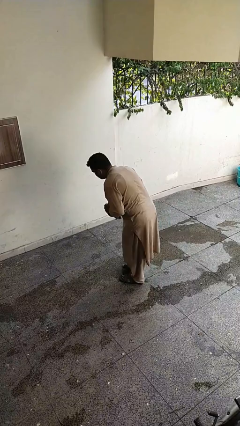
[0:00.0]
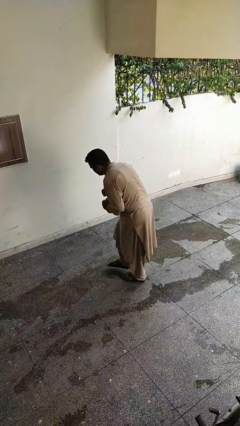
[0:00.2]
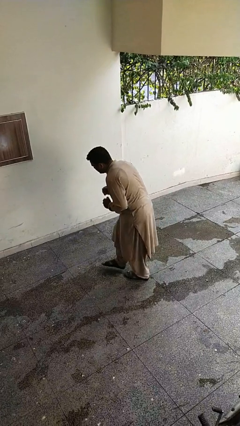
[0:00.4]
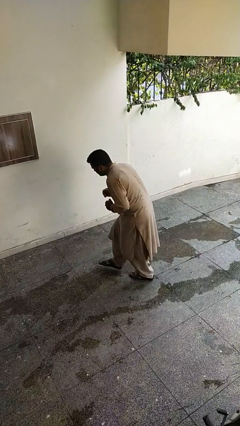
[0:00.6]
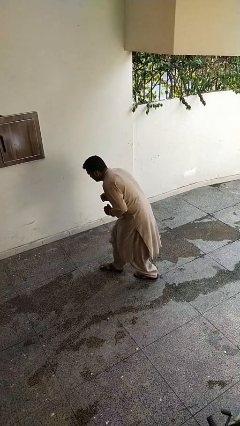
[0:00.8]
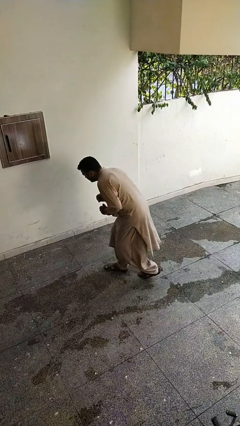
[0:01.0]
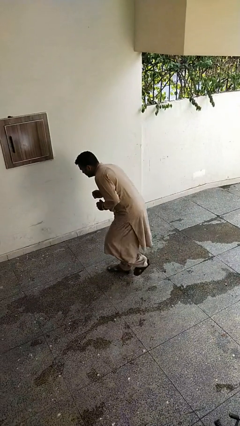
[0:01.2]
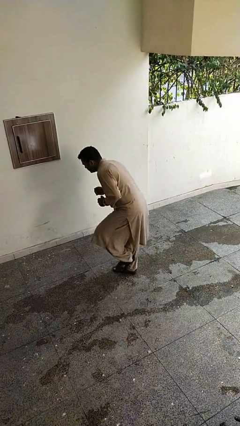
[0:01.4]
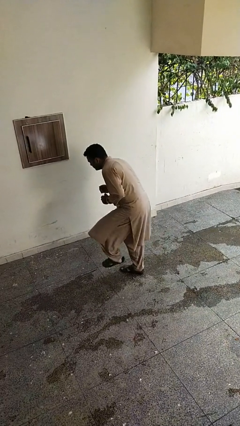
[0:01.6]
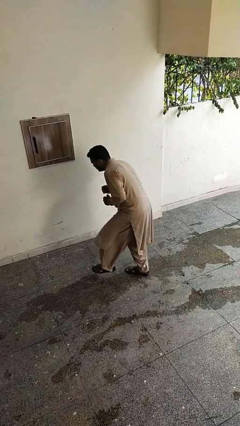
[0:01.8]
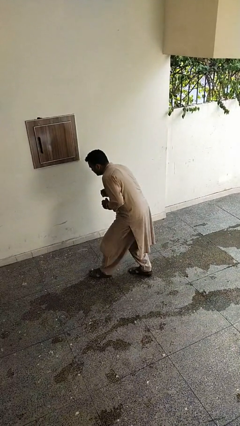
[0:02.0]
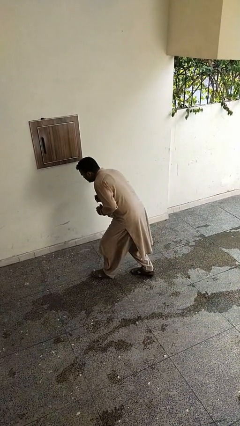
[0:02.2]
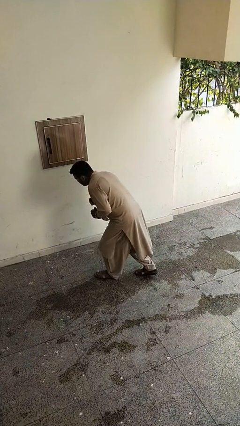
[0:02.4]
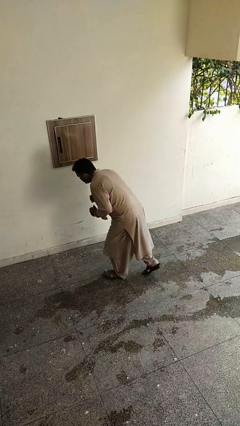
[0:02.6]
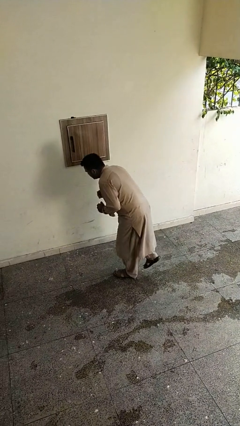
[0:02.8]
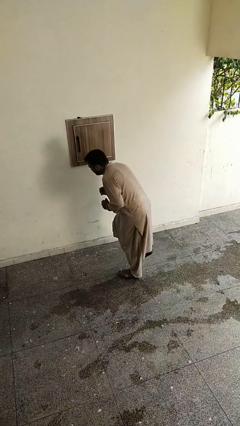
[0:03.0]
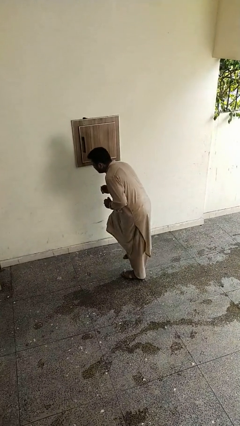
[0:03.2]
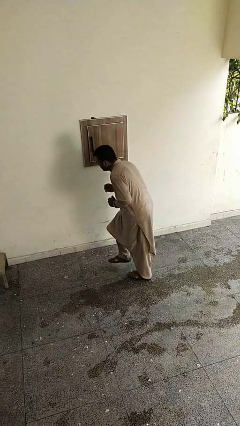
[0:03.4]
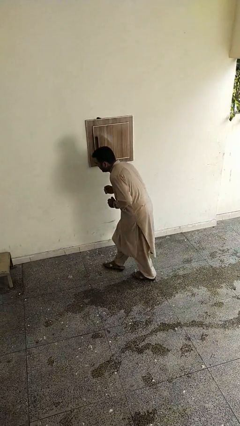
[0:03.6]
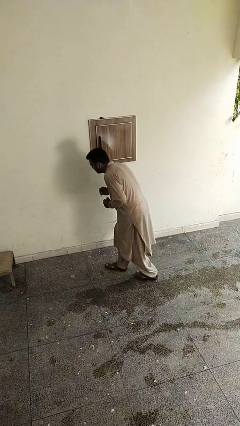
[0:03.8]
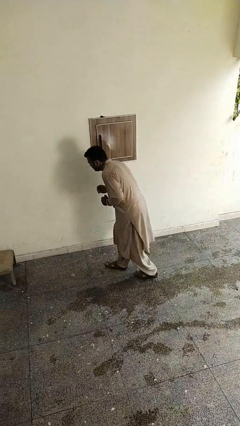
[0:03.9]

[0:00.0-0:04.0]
person walks tiptoe

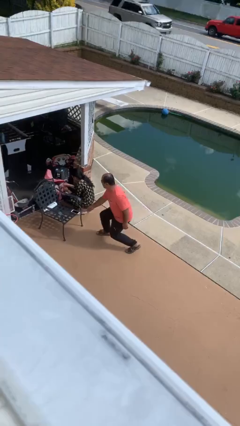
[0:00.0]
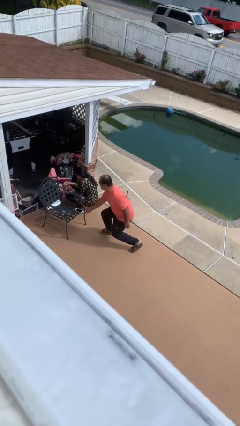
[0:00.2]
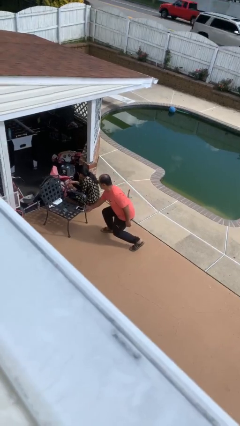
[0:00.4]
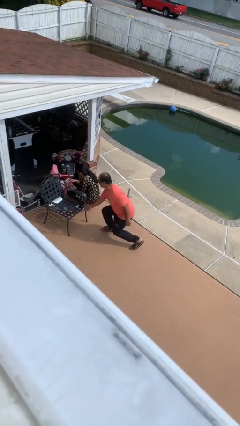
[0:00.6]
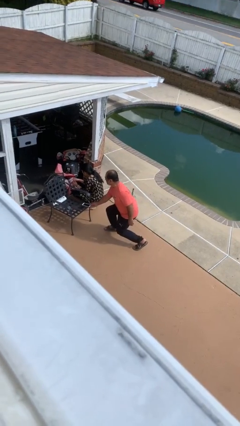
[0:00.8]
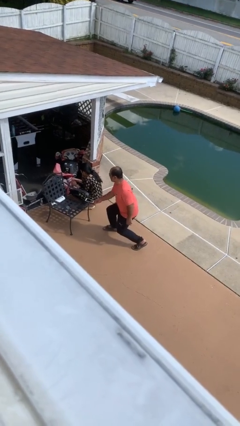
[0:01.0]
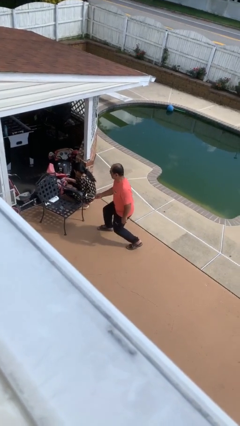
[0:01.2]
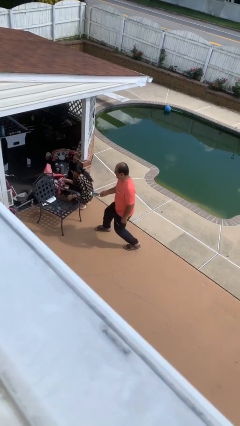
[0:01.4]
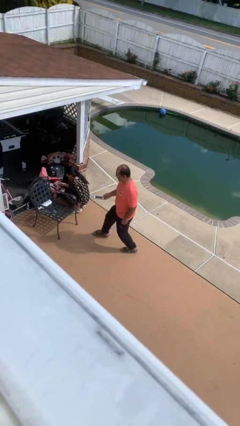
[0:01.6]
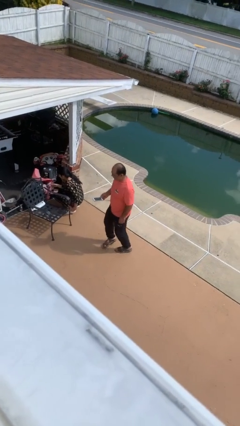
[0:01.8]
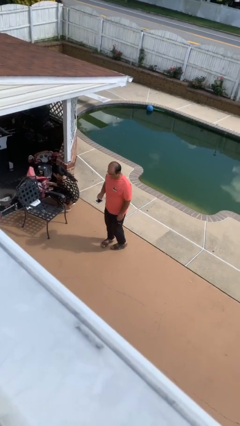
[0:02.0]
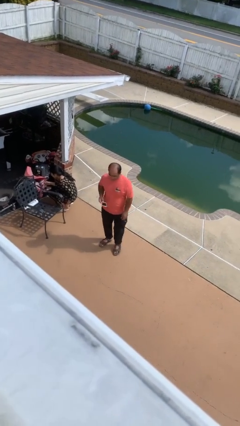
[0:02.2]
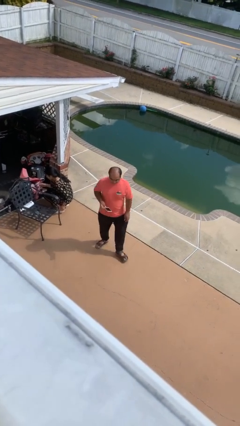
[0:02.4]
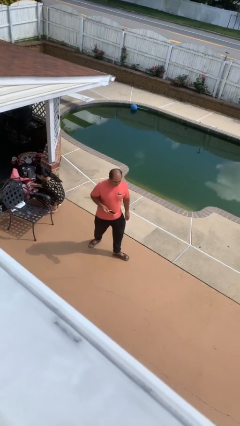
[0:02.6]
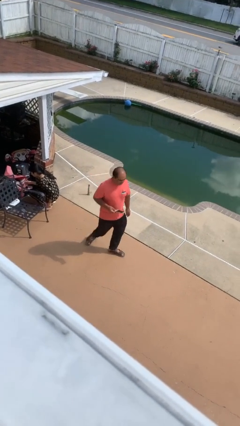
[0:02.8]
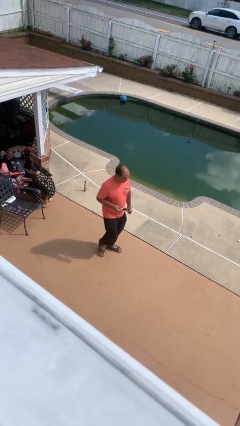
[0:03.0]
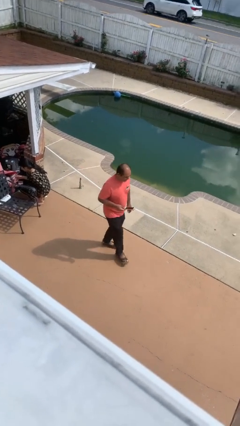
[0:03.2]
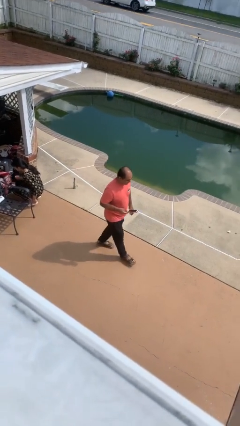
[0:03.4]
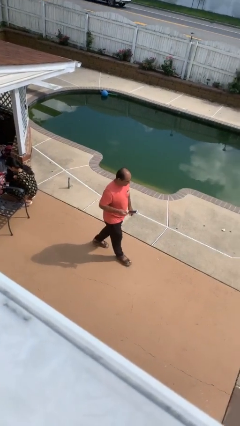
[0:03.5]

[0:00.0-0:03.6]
person steals object from person

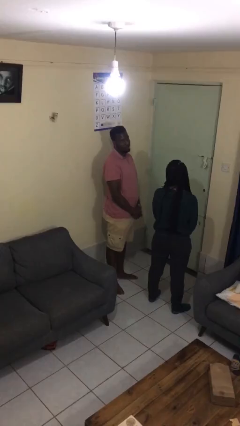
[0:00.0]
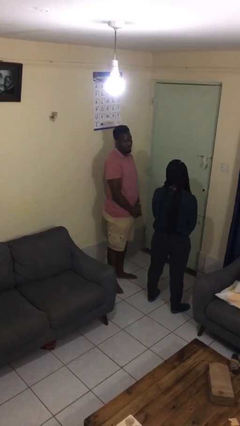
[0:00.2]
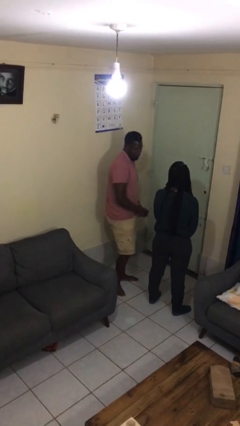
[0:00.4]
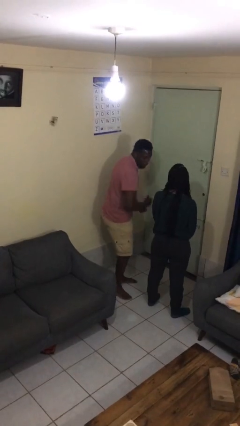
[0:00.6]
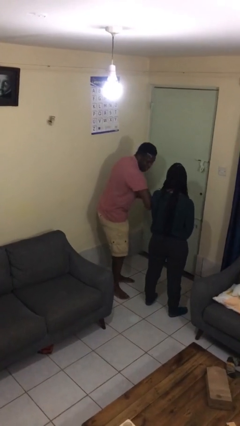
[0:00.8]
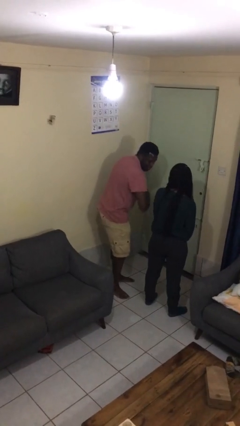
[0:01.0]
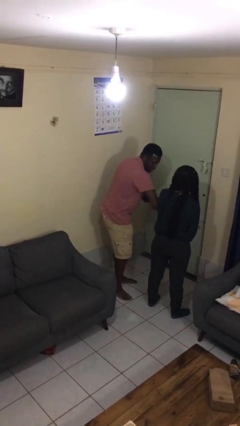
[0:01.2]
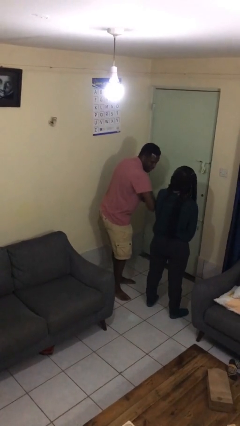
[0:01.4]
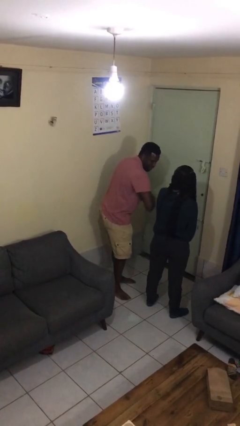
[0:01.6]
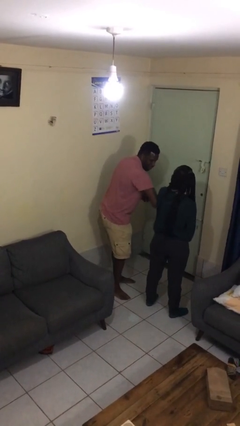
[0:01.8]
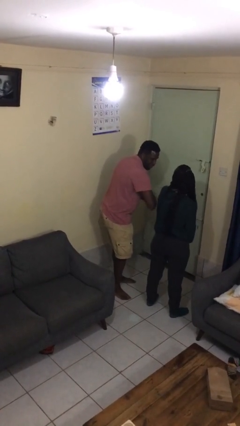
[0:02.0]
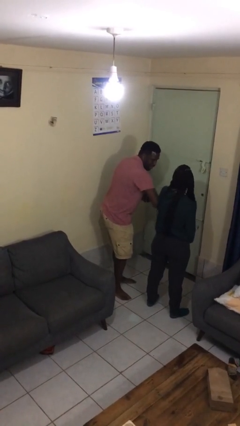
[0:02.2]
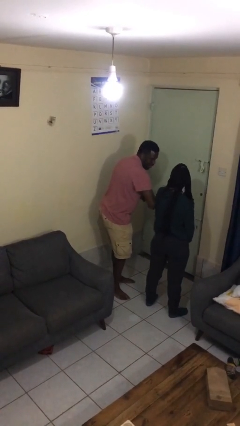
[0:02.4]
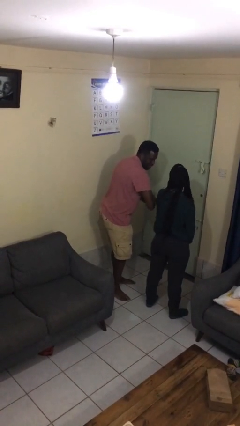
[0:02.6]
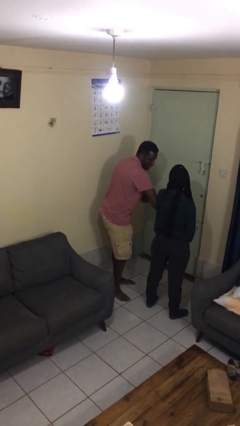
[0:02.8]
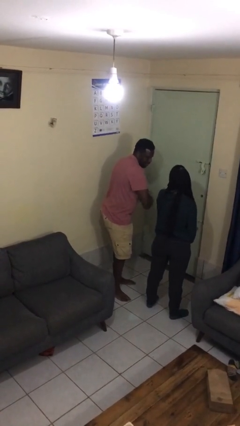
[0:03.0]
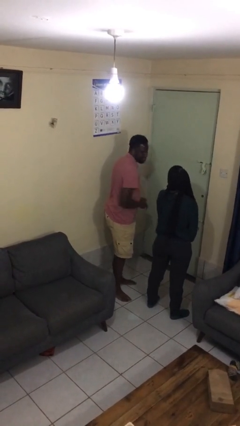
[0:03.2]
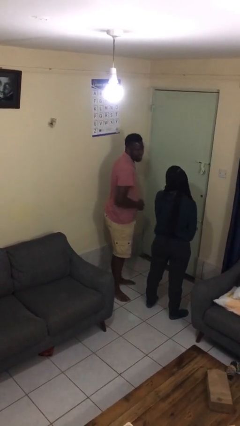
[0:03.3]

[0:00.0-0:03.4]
person nudges person with elbow

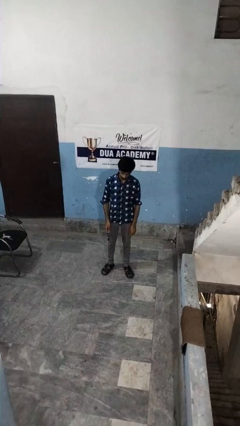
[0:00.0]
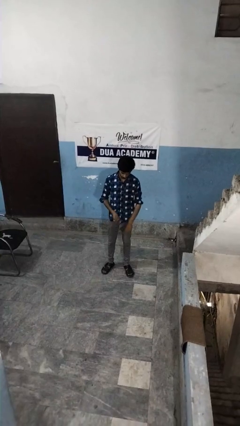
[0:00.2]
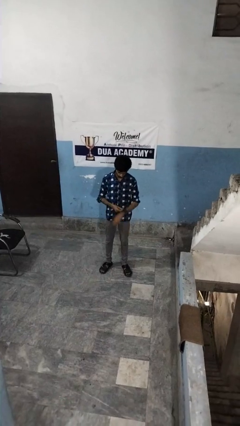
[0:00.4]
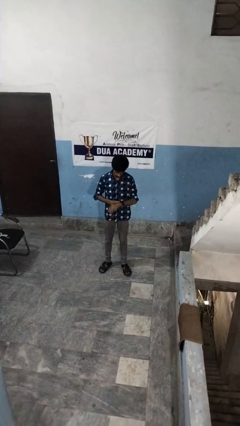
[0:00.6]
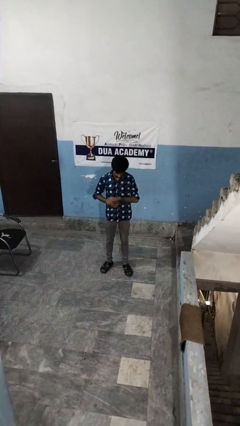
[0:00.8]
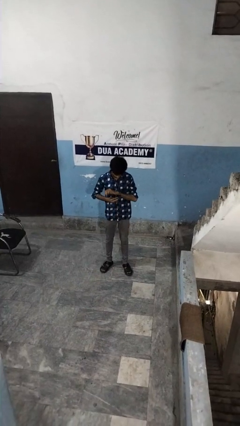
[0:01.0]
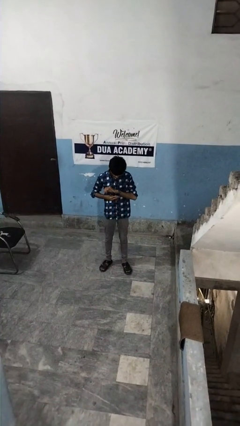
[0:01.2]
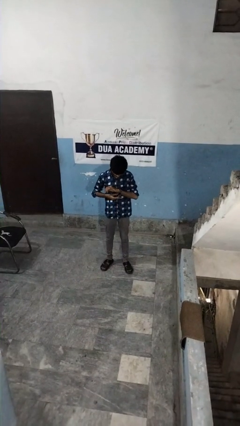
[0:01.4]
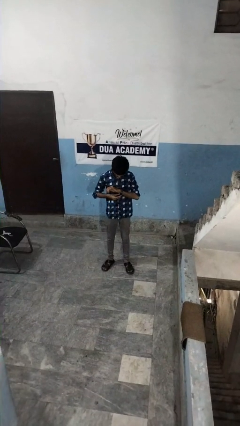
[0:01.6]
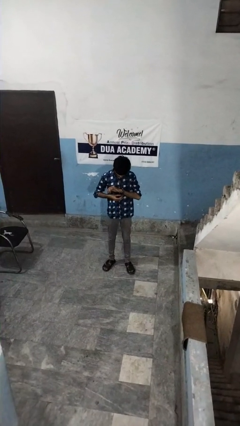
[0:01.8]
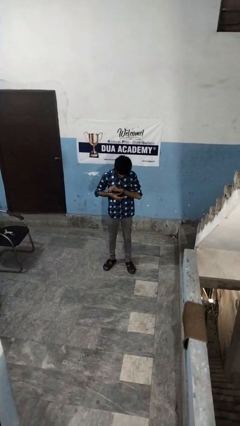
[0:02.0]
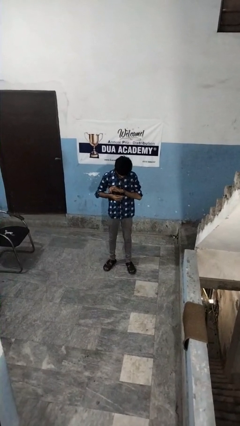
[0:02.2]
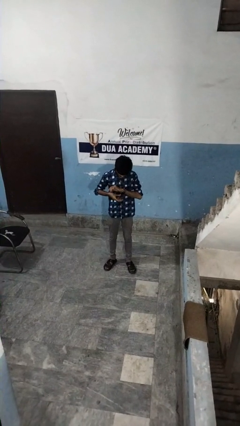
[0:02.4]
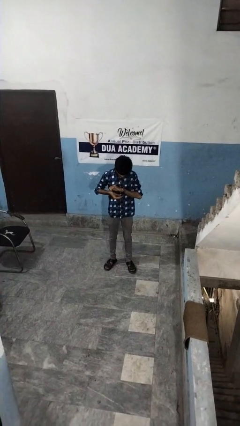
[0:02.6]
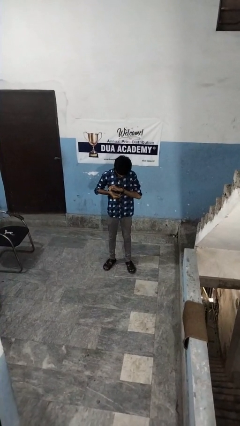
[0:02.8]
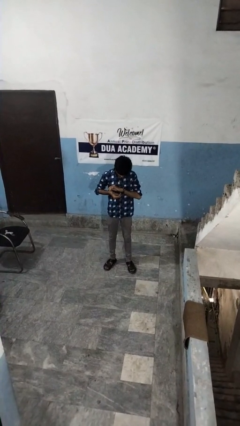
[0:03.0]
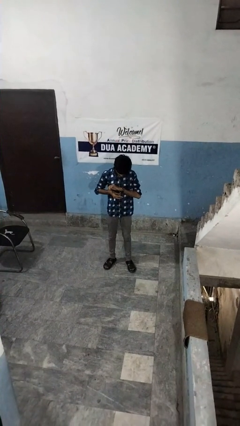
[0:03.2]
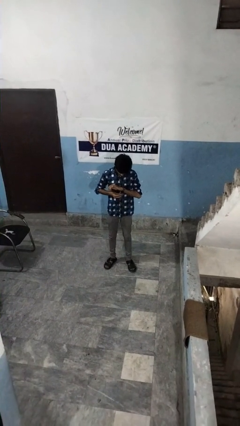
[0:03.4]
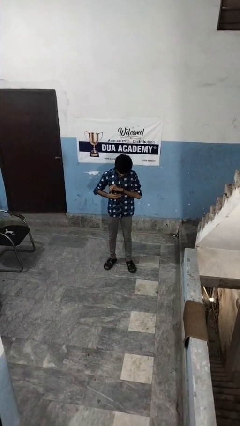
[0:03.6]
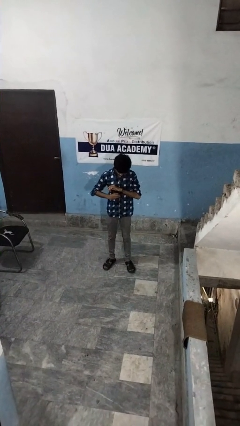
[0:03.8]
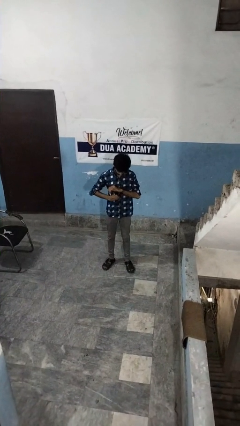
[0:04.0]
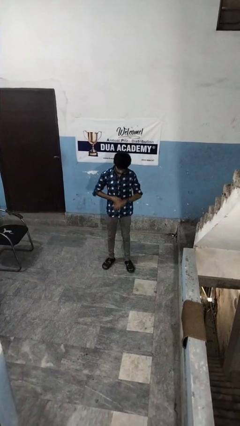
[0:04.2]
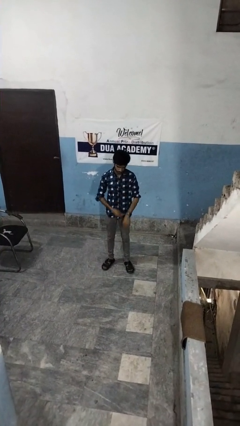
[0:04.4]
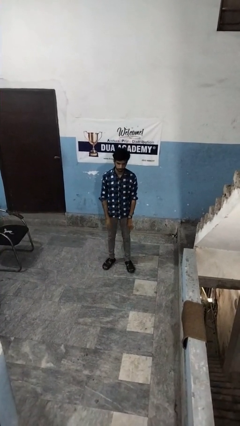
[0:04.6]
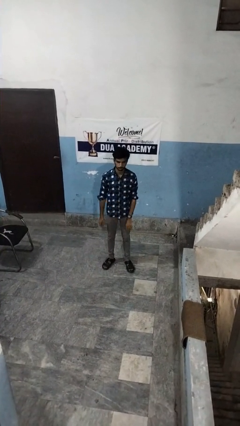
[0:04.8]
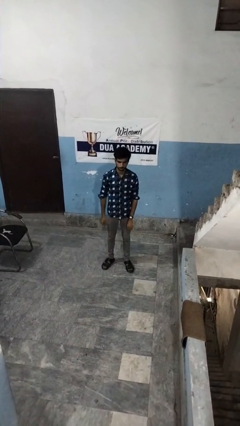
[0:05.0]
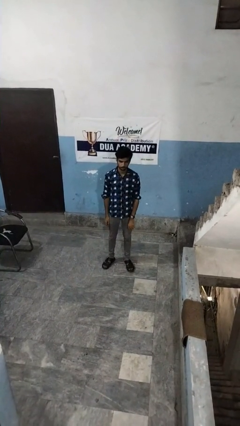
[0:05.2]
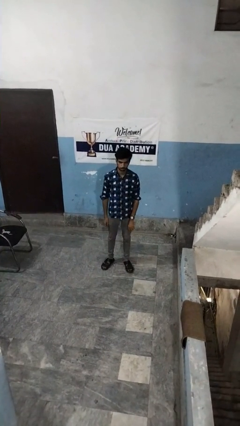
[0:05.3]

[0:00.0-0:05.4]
person puts on wristwatch

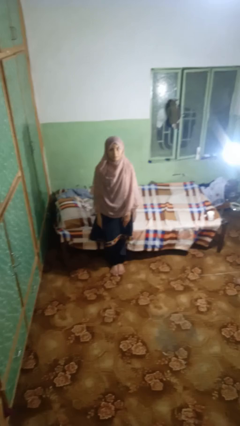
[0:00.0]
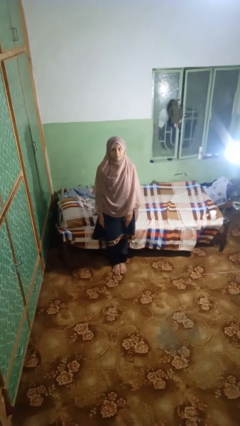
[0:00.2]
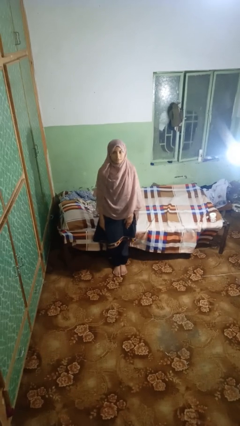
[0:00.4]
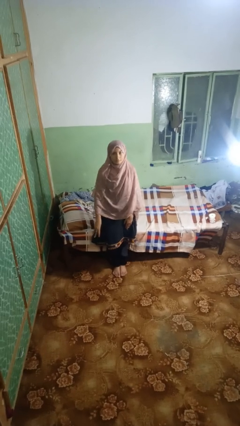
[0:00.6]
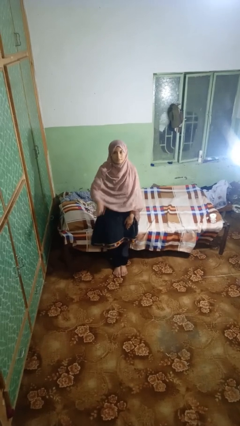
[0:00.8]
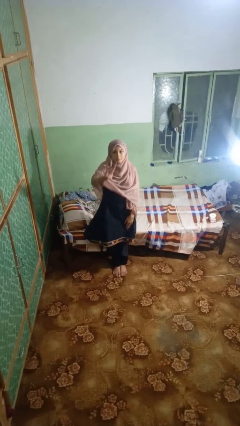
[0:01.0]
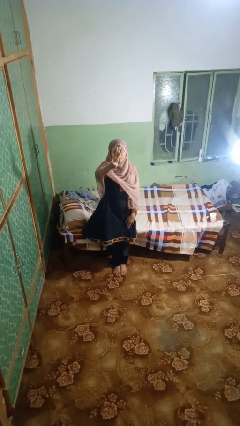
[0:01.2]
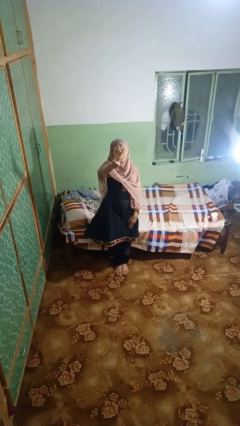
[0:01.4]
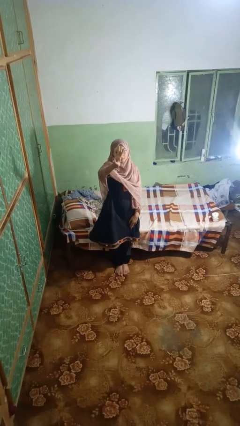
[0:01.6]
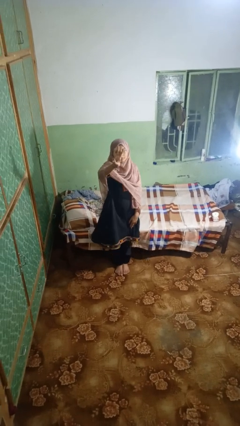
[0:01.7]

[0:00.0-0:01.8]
person gestures number three
